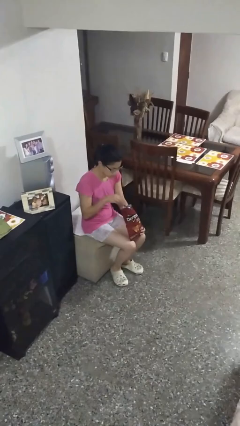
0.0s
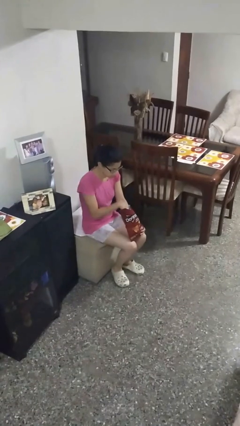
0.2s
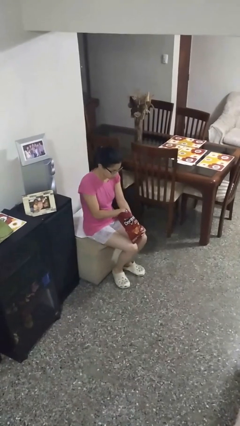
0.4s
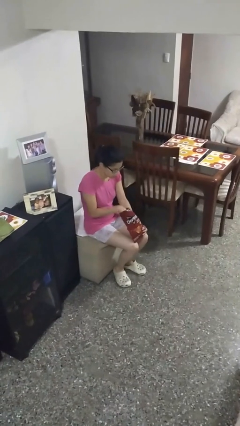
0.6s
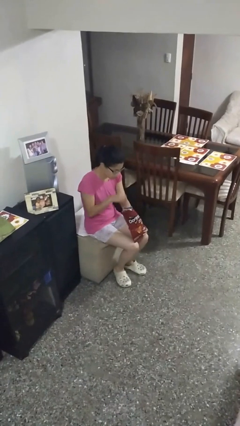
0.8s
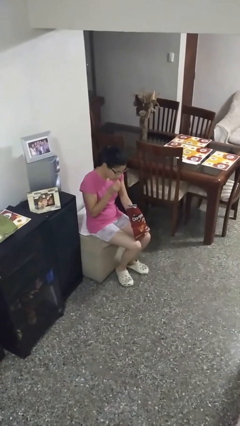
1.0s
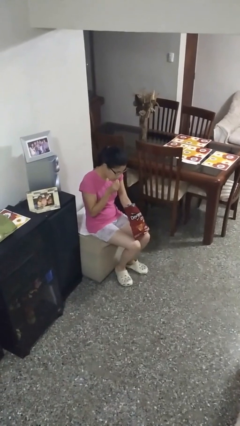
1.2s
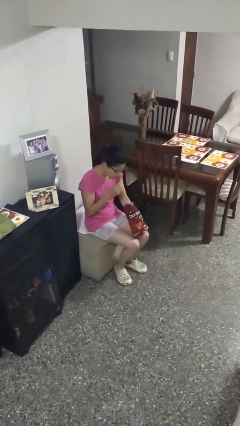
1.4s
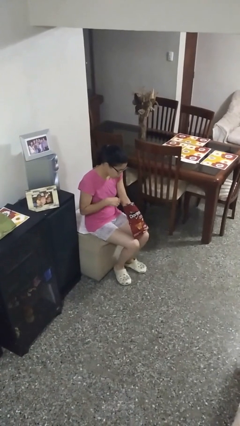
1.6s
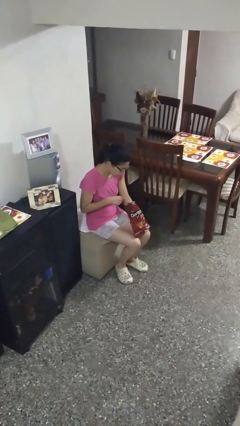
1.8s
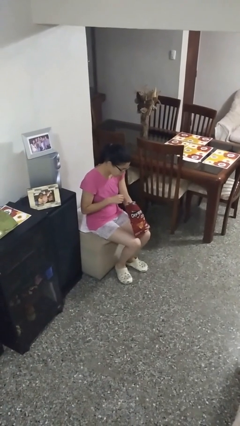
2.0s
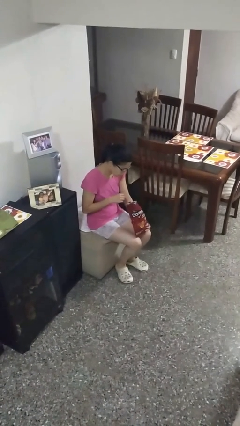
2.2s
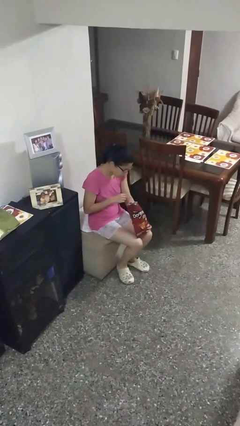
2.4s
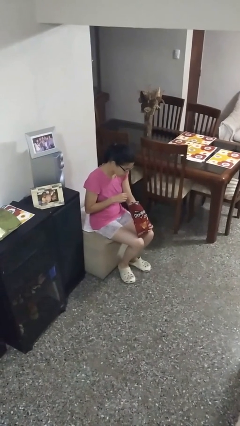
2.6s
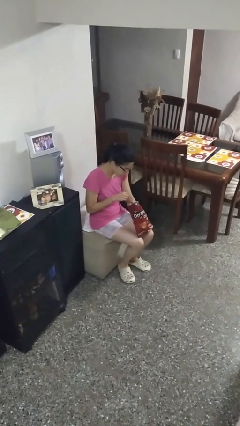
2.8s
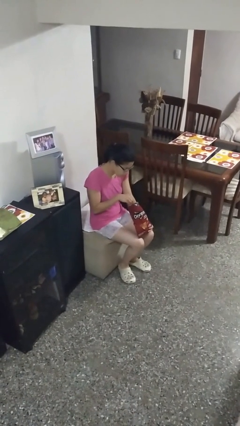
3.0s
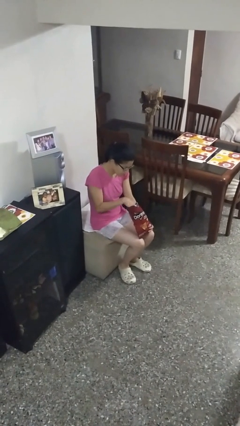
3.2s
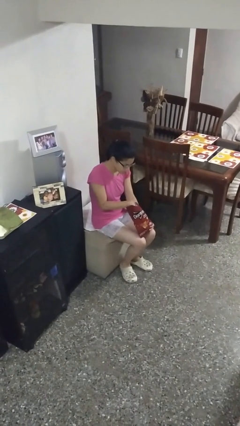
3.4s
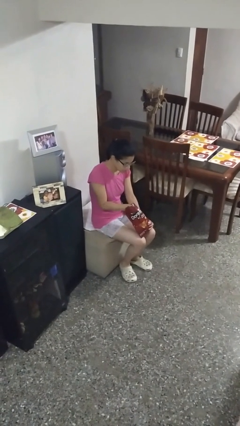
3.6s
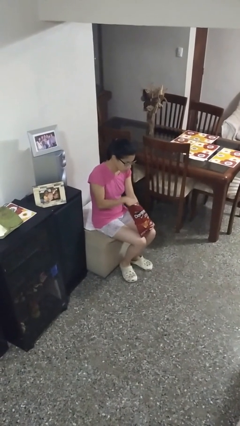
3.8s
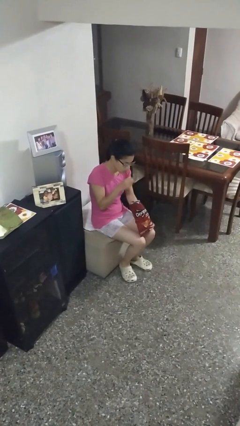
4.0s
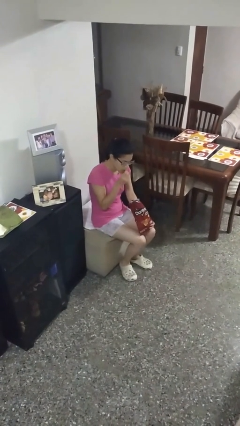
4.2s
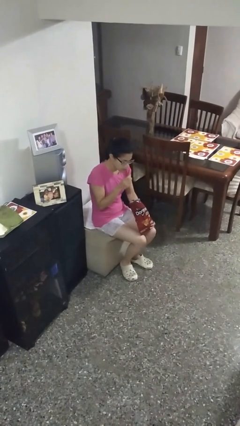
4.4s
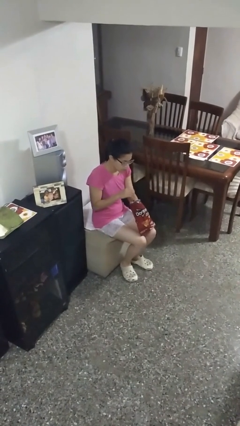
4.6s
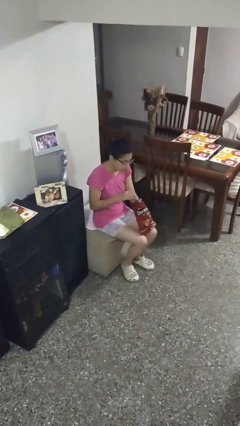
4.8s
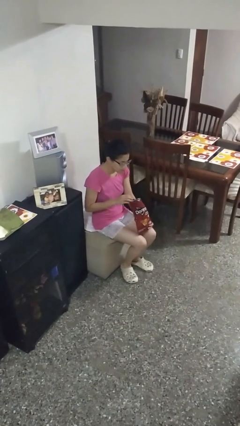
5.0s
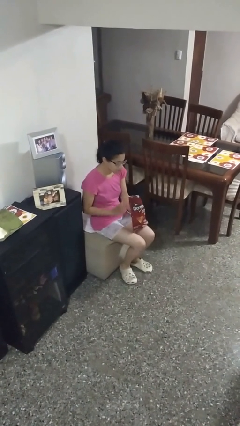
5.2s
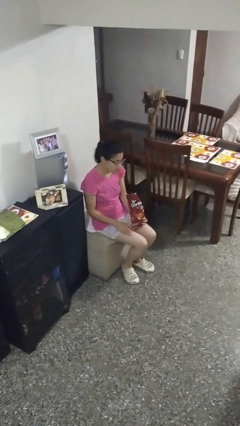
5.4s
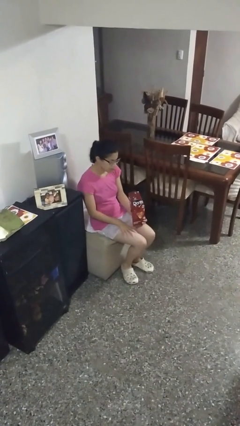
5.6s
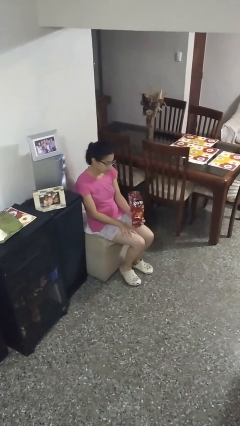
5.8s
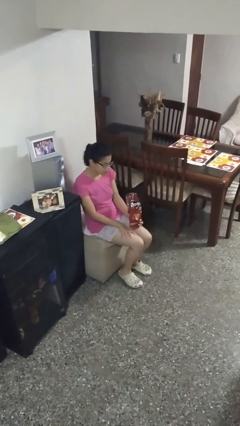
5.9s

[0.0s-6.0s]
person eats snack from bag

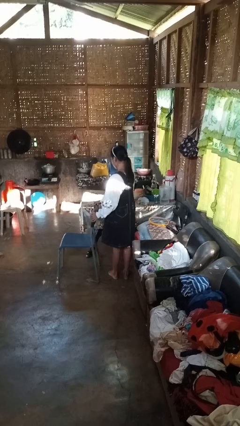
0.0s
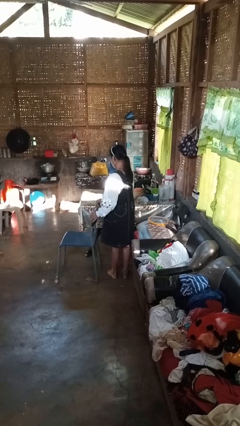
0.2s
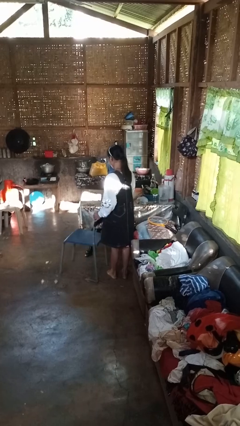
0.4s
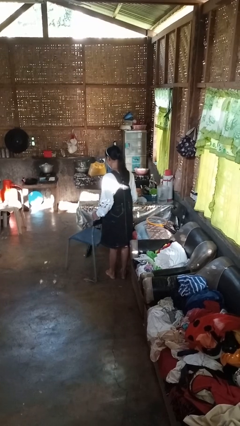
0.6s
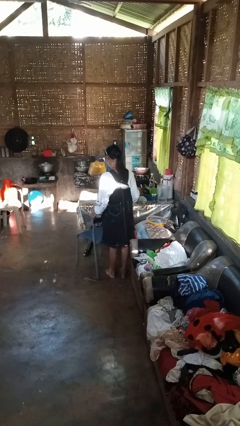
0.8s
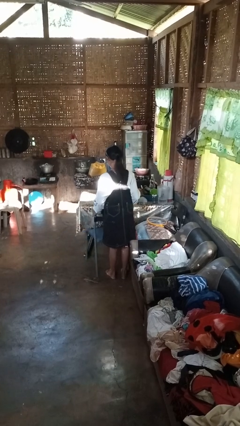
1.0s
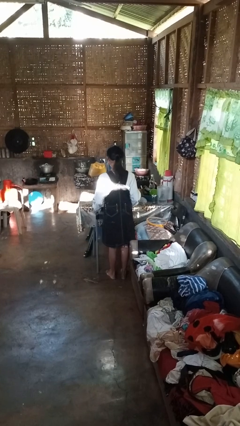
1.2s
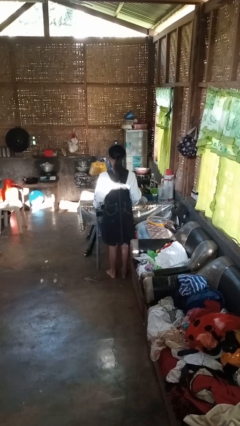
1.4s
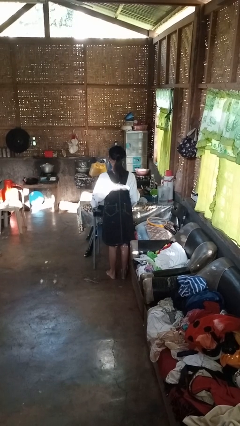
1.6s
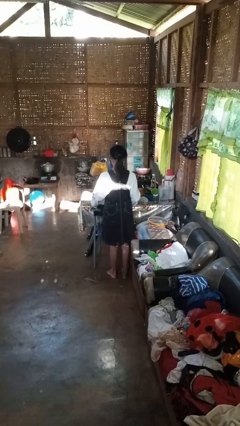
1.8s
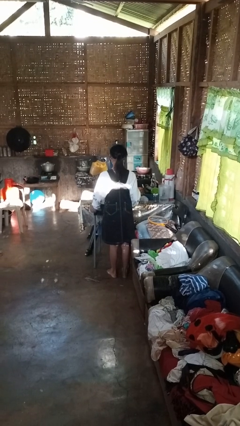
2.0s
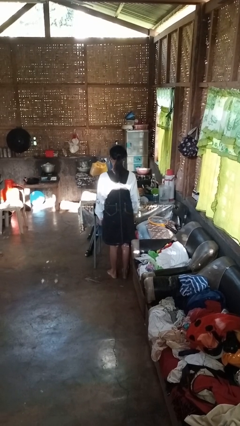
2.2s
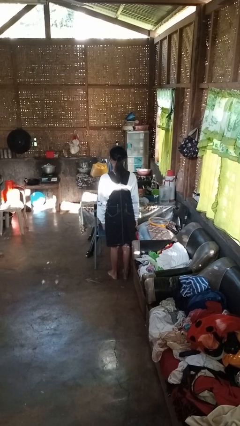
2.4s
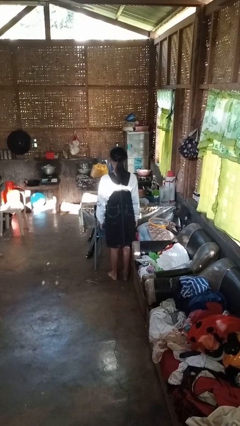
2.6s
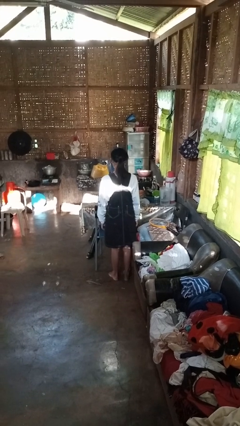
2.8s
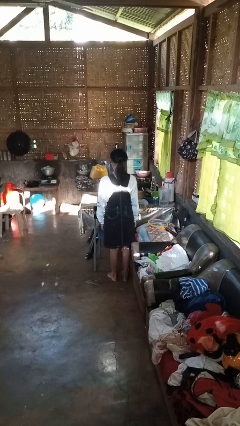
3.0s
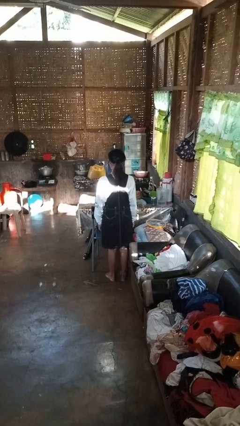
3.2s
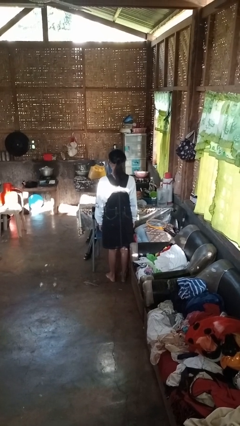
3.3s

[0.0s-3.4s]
person pushes in chair

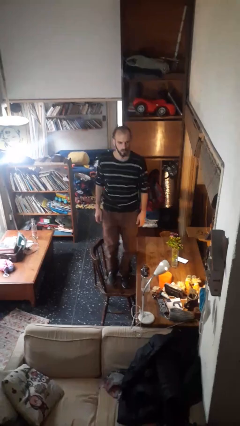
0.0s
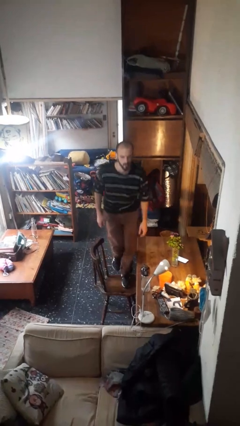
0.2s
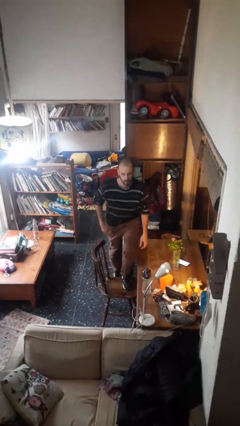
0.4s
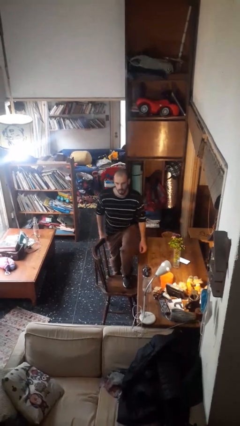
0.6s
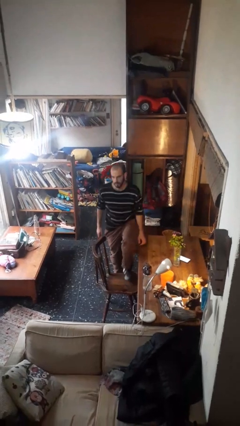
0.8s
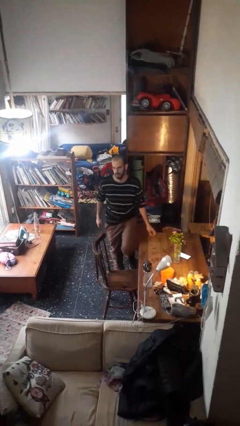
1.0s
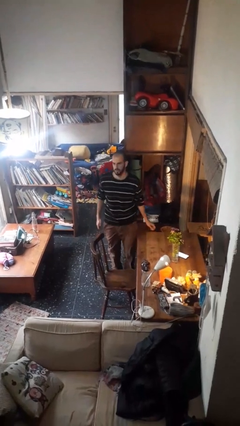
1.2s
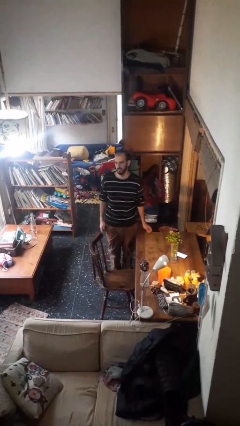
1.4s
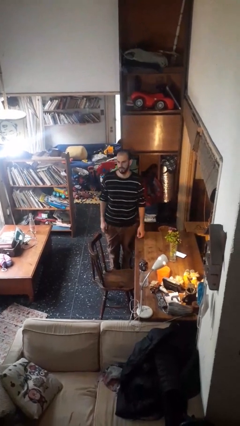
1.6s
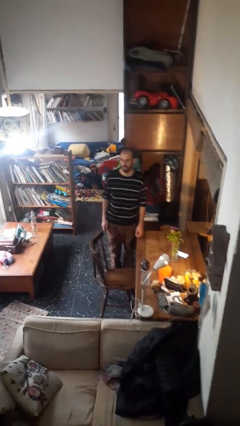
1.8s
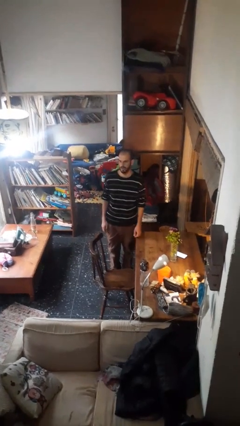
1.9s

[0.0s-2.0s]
person climbs off chair

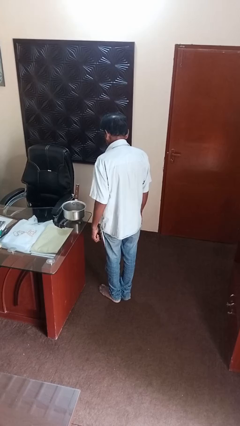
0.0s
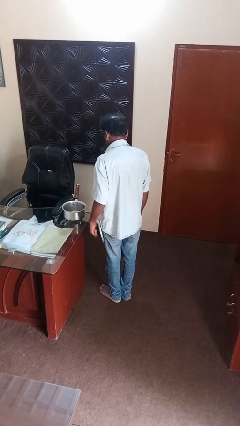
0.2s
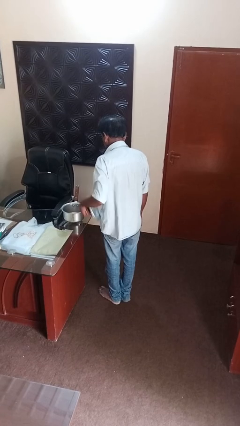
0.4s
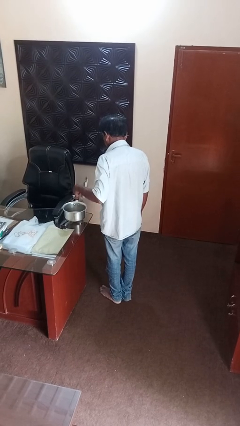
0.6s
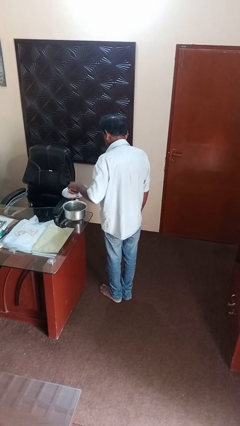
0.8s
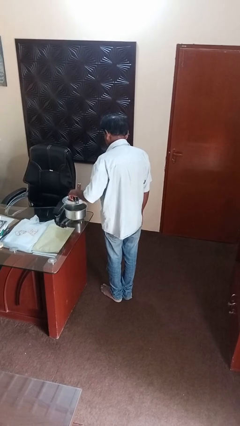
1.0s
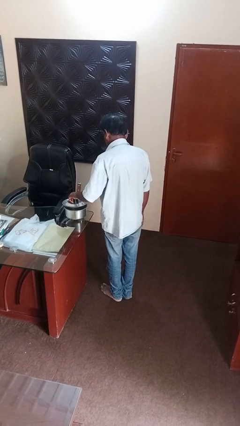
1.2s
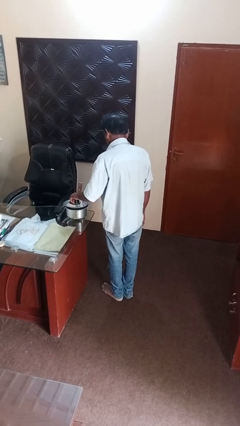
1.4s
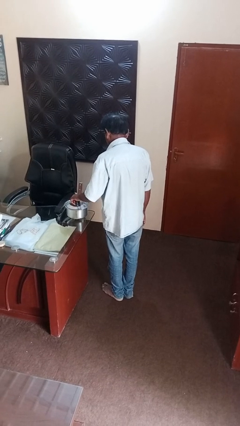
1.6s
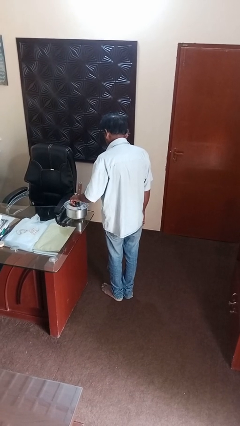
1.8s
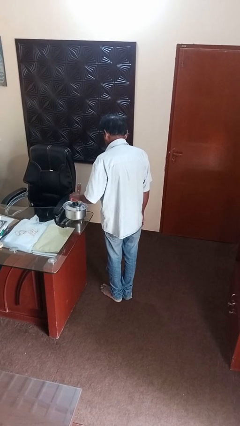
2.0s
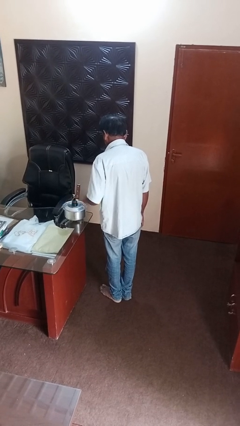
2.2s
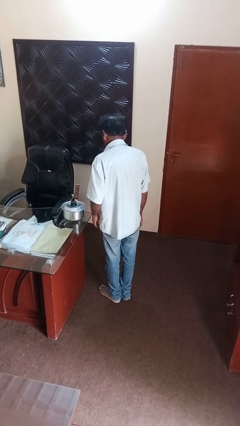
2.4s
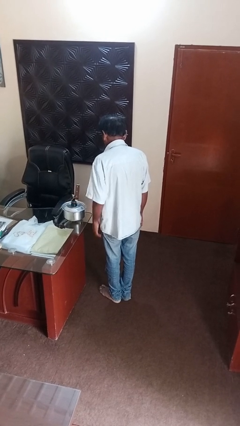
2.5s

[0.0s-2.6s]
person closes jar

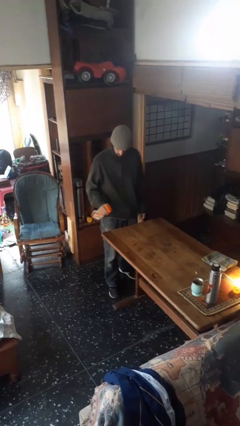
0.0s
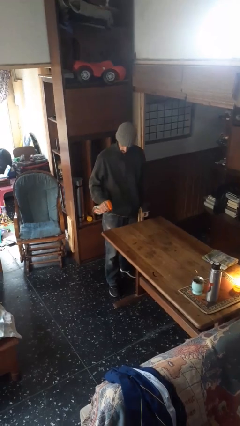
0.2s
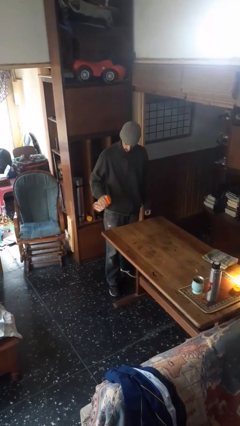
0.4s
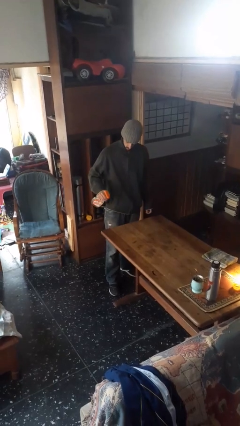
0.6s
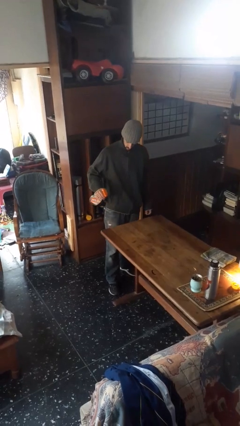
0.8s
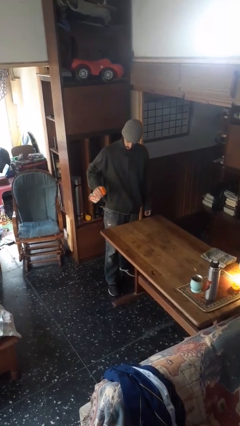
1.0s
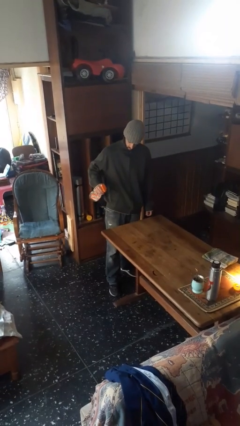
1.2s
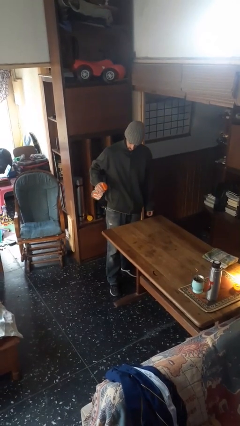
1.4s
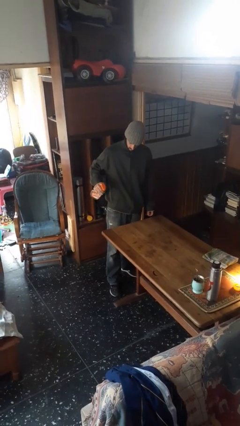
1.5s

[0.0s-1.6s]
person sprays from bottle

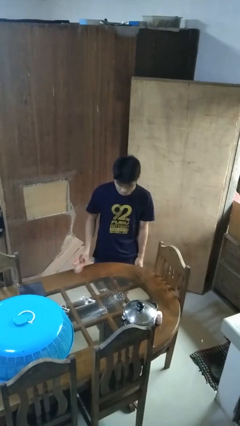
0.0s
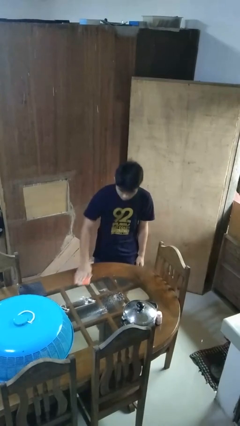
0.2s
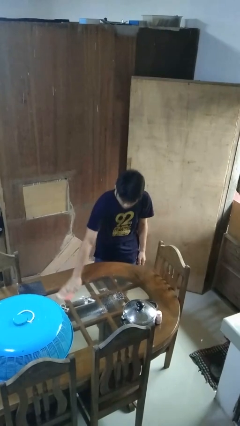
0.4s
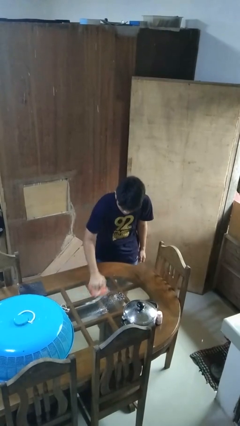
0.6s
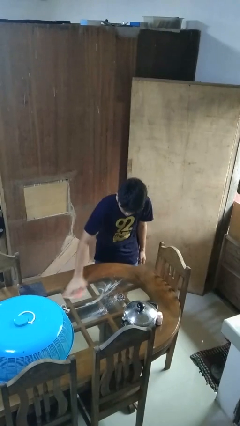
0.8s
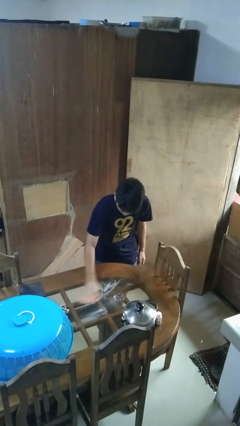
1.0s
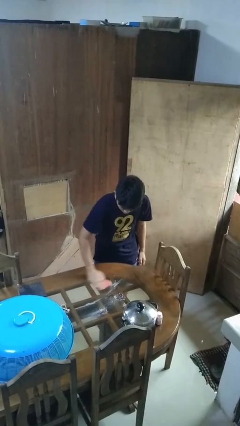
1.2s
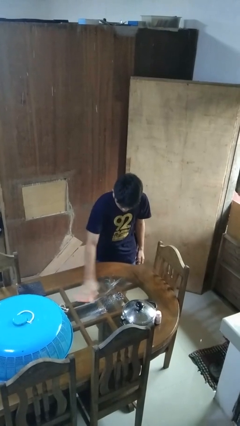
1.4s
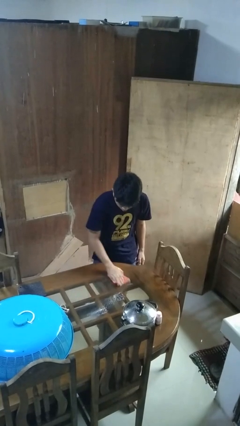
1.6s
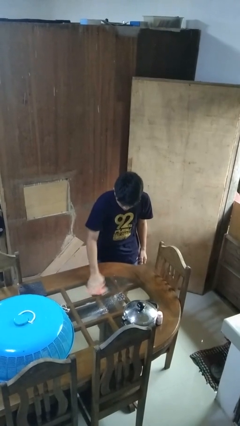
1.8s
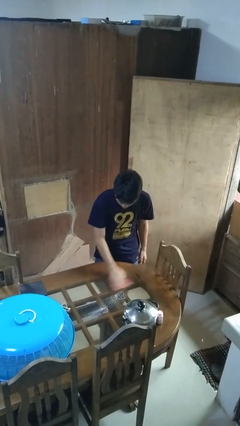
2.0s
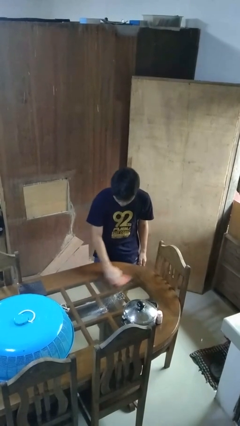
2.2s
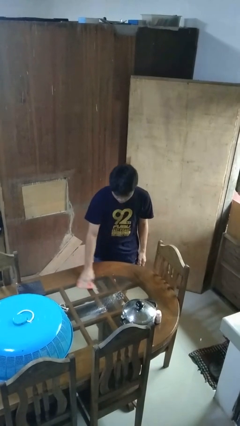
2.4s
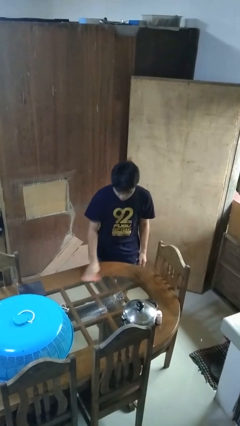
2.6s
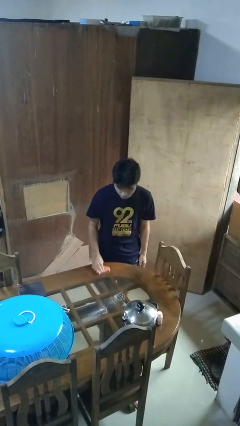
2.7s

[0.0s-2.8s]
person cleans table with rag
